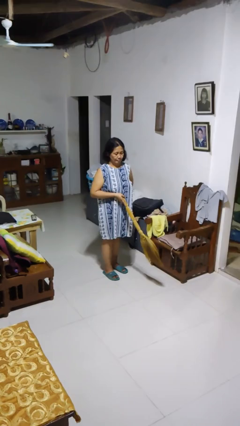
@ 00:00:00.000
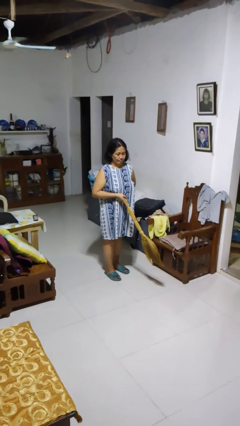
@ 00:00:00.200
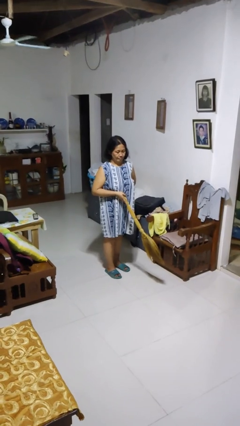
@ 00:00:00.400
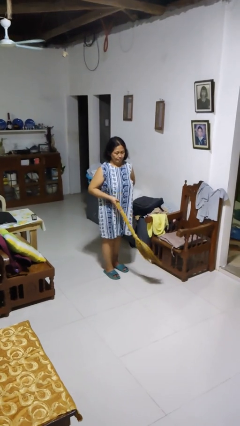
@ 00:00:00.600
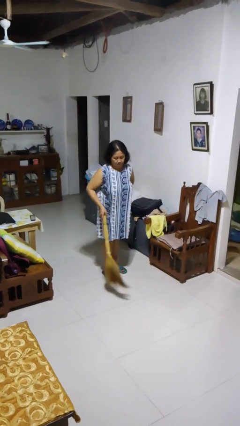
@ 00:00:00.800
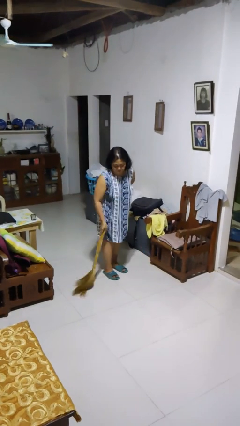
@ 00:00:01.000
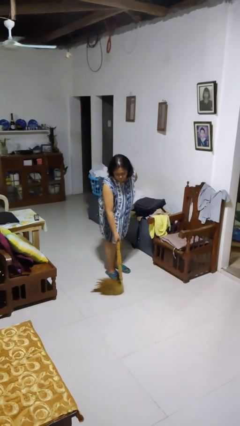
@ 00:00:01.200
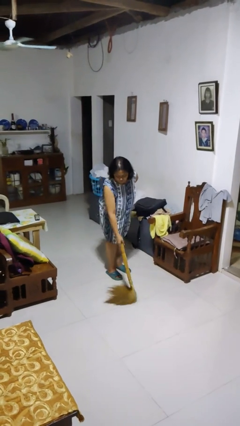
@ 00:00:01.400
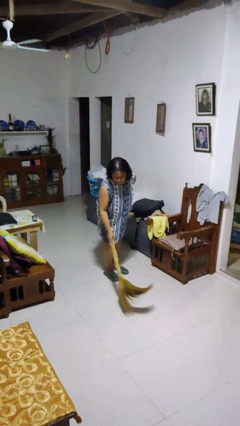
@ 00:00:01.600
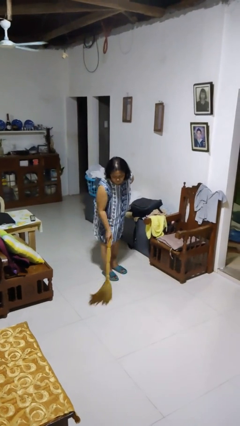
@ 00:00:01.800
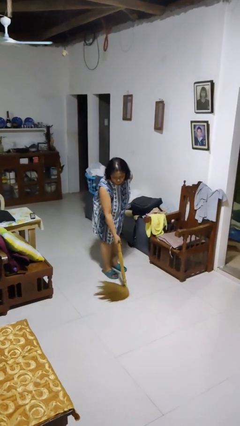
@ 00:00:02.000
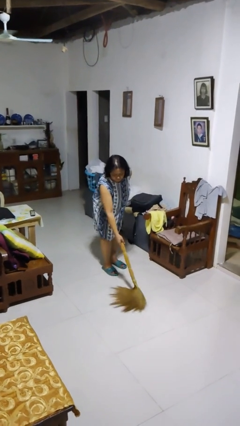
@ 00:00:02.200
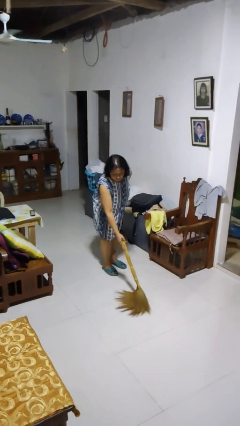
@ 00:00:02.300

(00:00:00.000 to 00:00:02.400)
person sweeps floor

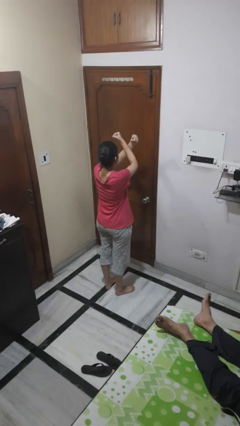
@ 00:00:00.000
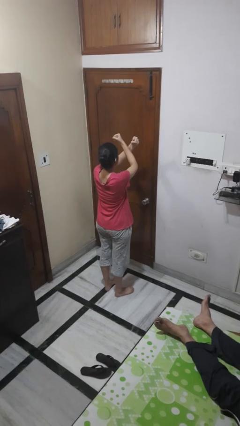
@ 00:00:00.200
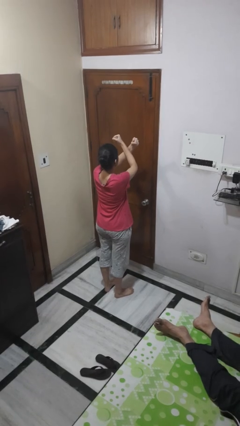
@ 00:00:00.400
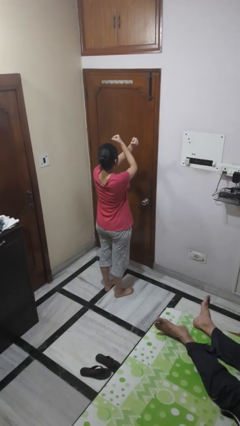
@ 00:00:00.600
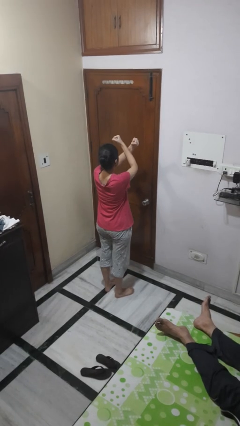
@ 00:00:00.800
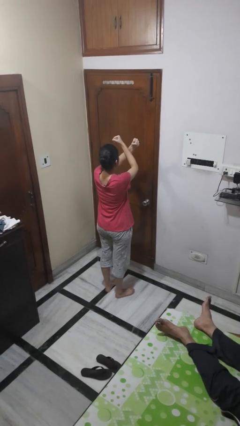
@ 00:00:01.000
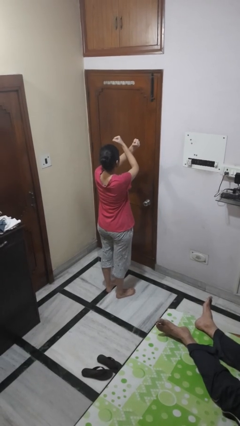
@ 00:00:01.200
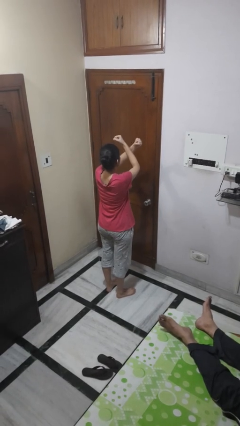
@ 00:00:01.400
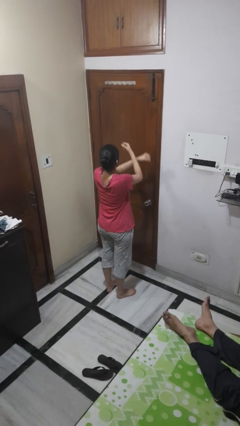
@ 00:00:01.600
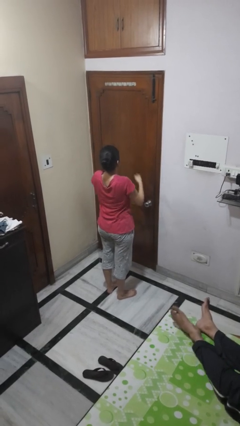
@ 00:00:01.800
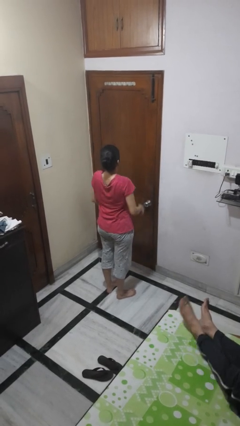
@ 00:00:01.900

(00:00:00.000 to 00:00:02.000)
person gestures arms x

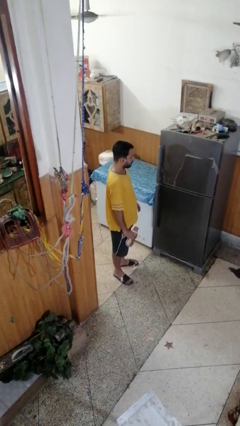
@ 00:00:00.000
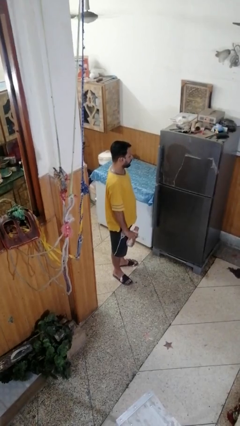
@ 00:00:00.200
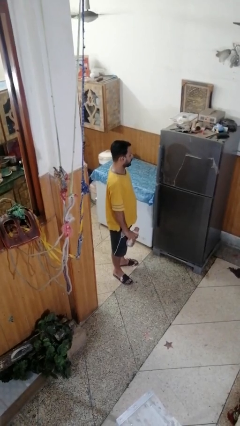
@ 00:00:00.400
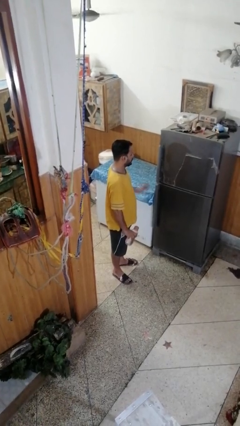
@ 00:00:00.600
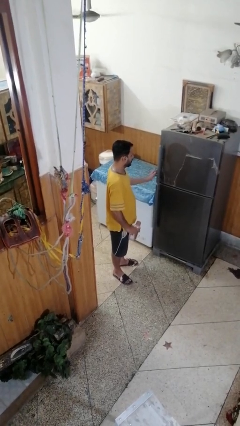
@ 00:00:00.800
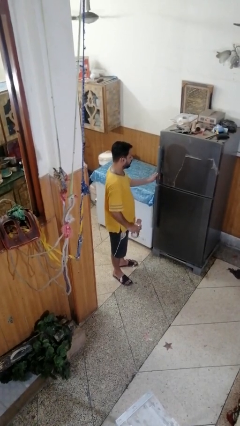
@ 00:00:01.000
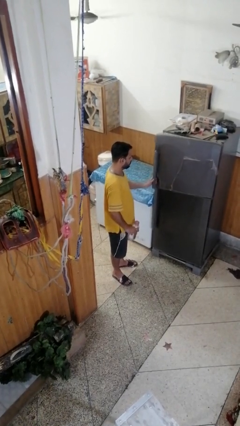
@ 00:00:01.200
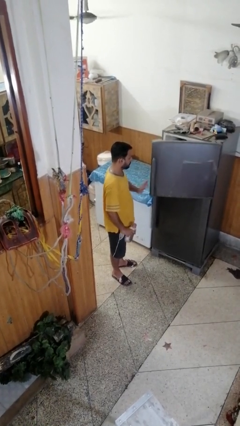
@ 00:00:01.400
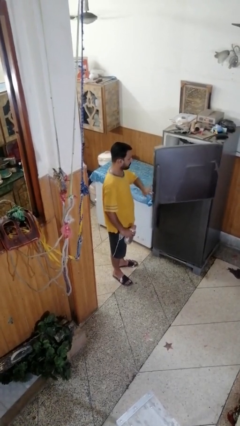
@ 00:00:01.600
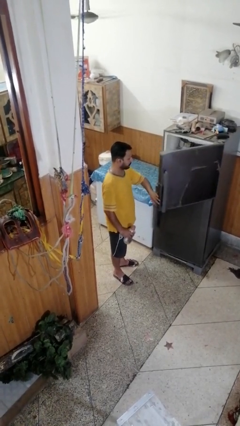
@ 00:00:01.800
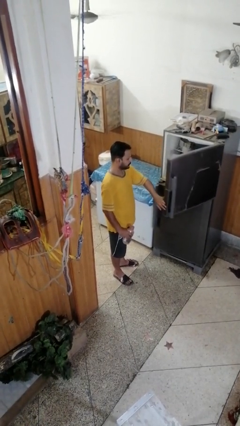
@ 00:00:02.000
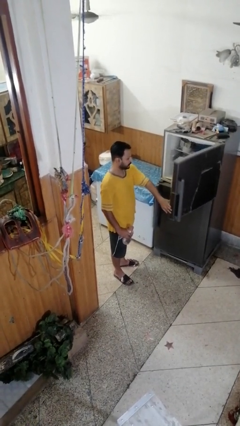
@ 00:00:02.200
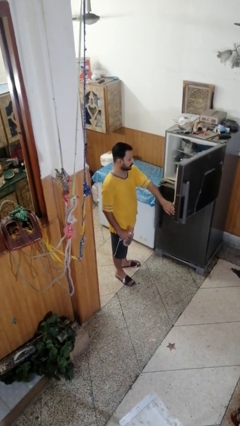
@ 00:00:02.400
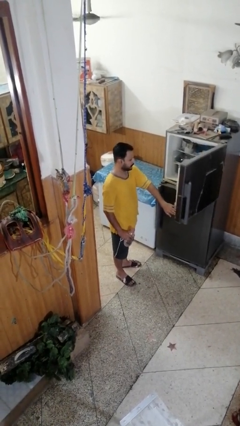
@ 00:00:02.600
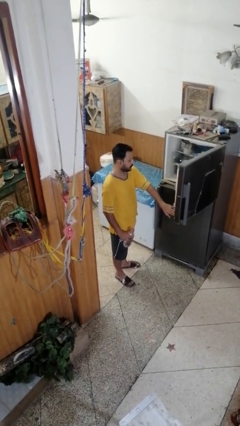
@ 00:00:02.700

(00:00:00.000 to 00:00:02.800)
person opens refrigerator

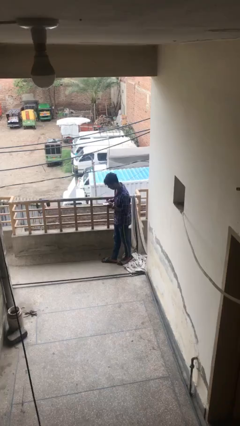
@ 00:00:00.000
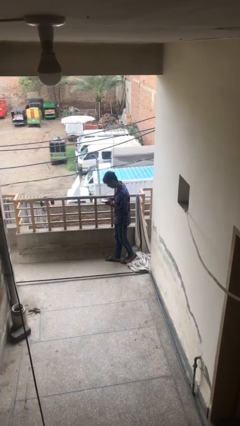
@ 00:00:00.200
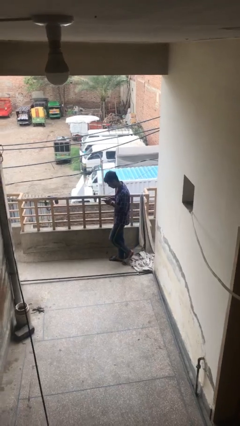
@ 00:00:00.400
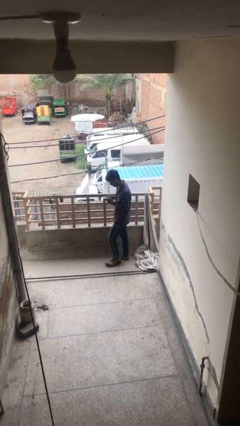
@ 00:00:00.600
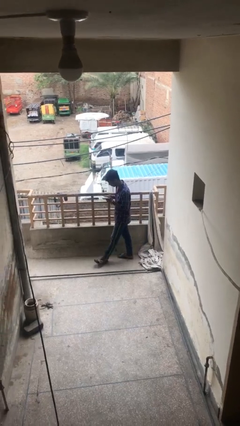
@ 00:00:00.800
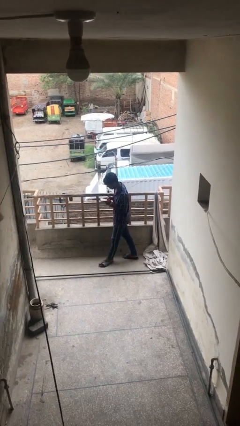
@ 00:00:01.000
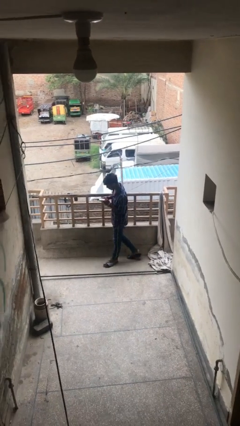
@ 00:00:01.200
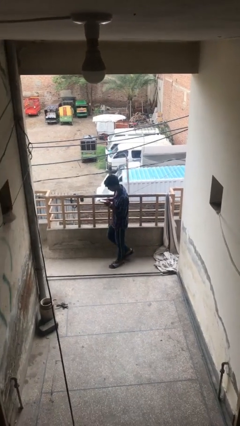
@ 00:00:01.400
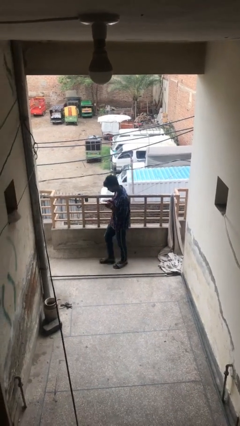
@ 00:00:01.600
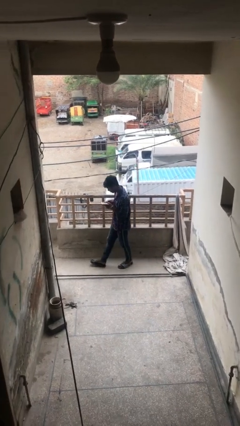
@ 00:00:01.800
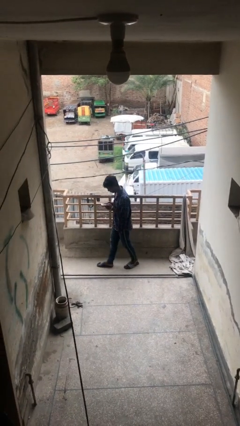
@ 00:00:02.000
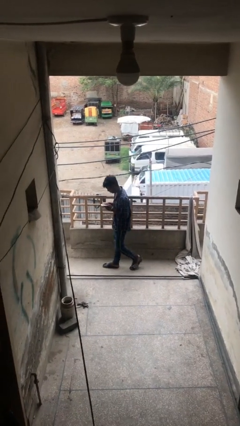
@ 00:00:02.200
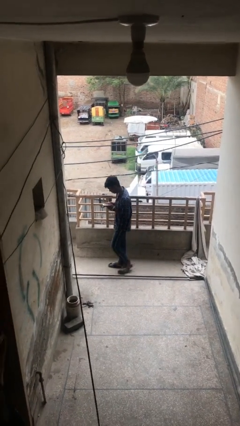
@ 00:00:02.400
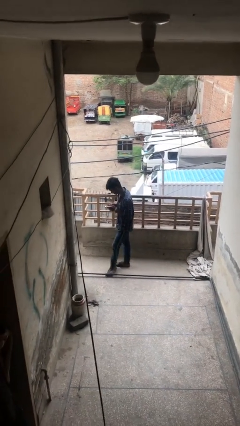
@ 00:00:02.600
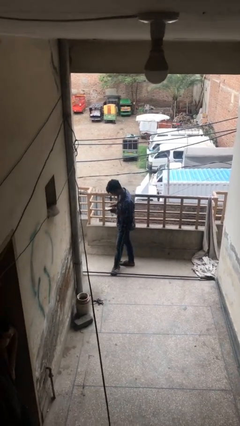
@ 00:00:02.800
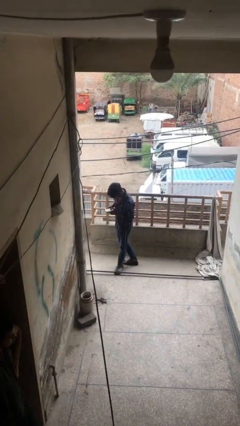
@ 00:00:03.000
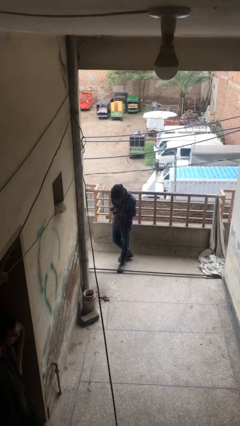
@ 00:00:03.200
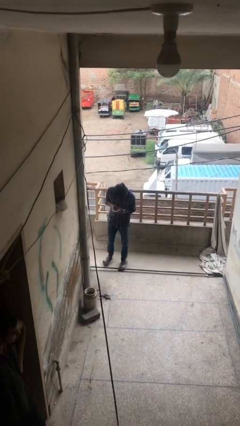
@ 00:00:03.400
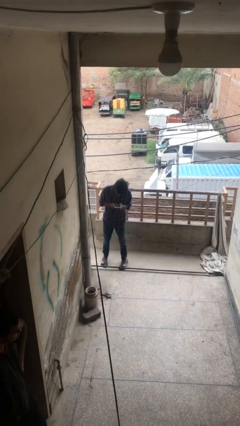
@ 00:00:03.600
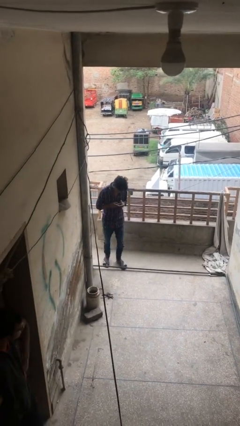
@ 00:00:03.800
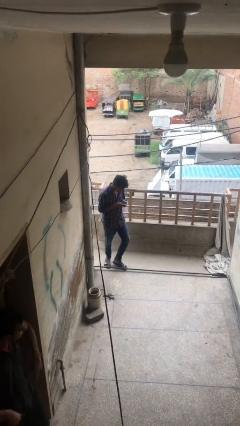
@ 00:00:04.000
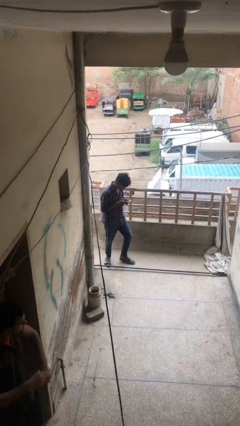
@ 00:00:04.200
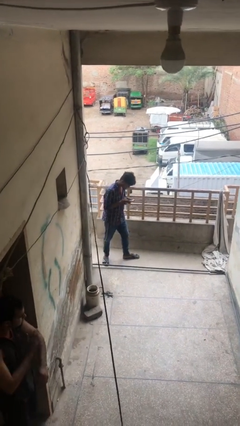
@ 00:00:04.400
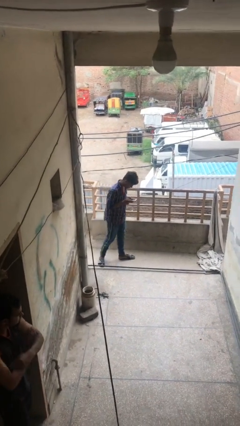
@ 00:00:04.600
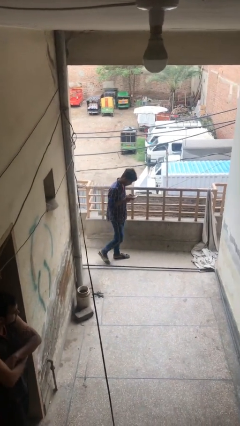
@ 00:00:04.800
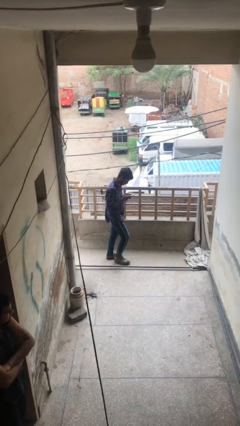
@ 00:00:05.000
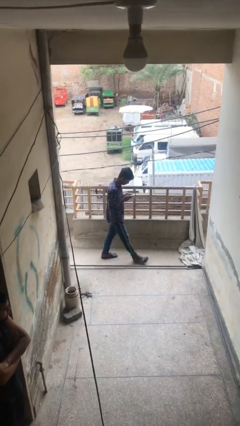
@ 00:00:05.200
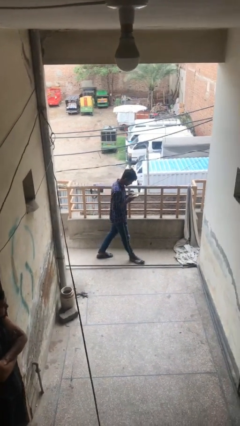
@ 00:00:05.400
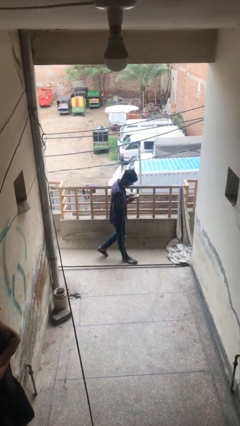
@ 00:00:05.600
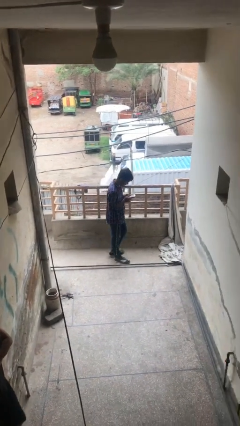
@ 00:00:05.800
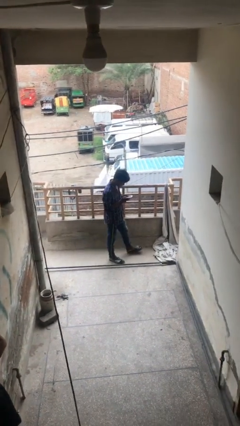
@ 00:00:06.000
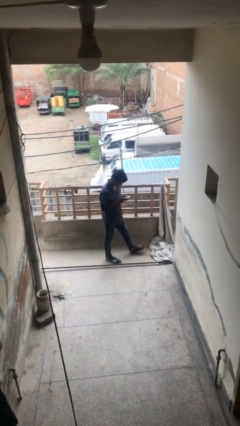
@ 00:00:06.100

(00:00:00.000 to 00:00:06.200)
person texts on phone

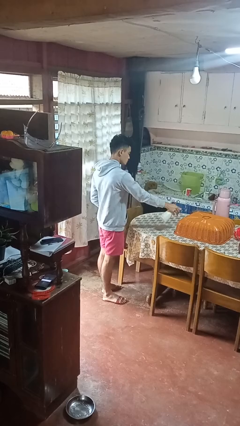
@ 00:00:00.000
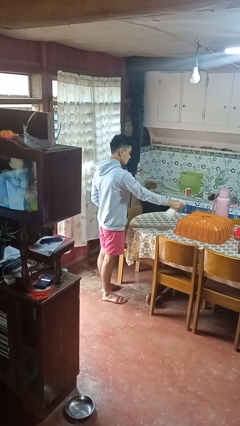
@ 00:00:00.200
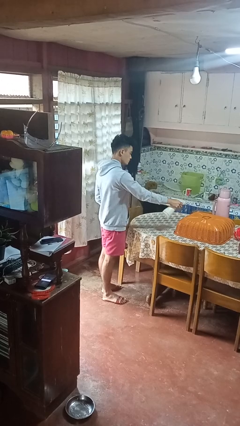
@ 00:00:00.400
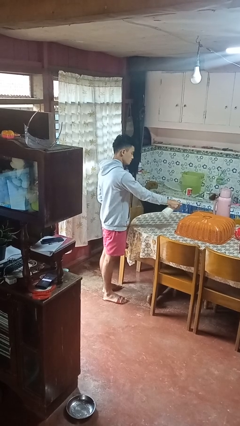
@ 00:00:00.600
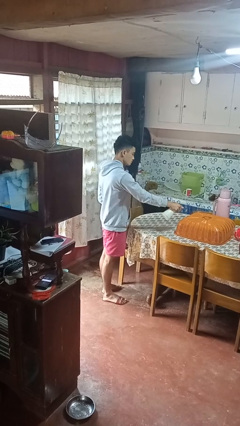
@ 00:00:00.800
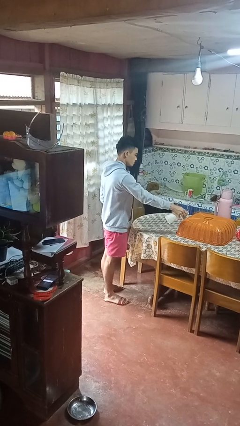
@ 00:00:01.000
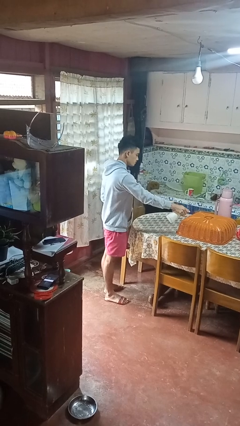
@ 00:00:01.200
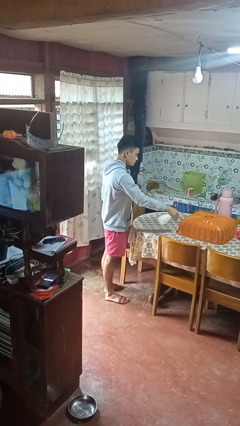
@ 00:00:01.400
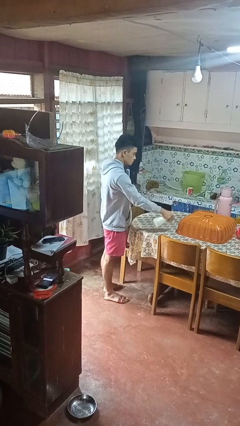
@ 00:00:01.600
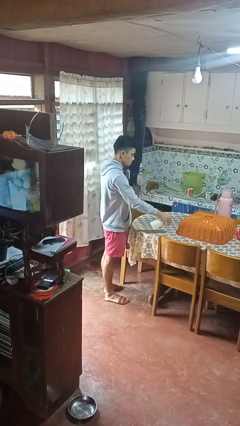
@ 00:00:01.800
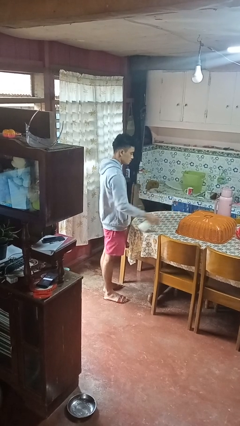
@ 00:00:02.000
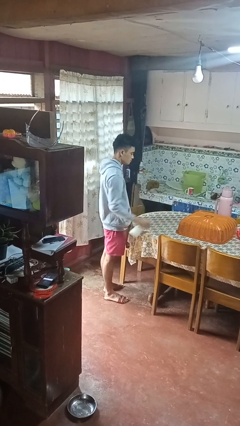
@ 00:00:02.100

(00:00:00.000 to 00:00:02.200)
person sprays from bottle

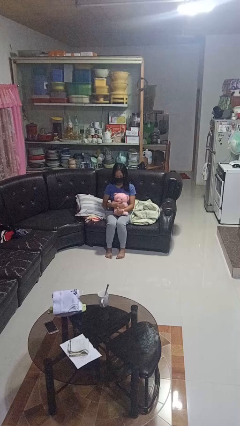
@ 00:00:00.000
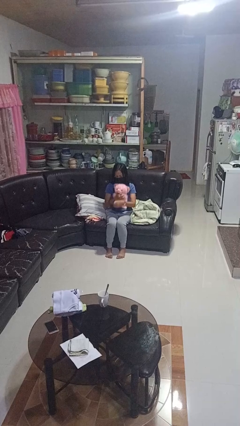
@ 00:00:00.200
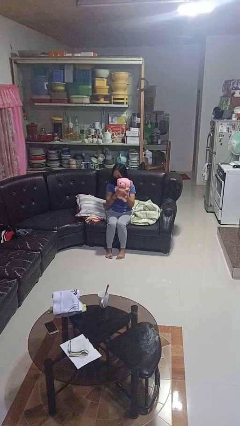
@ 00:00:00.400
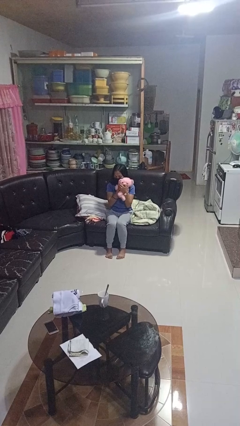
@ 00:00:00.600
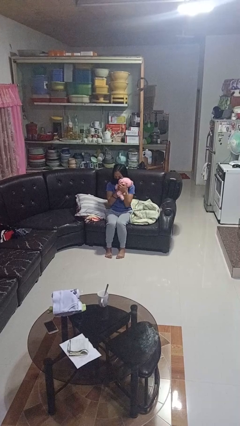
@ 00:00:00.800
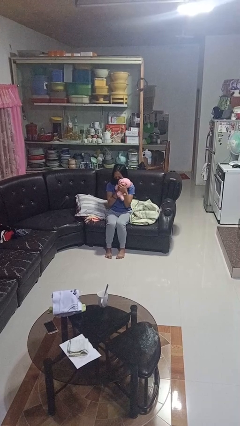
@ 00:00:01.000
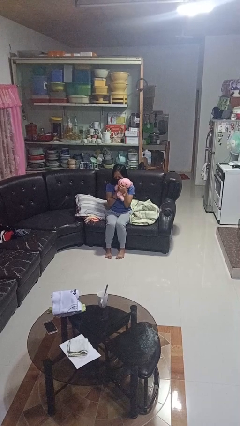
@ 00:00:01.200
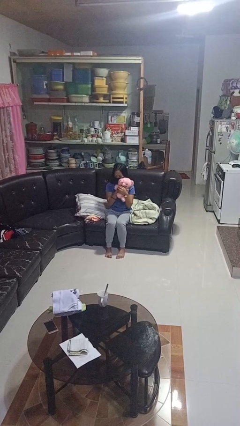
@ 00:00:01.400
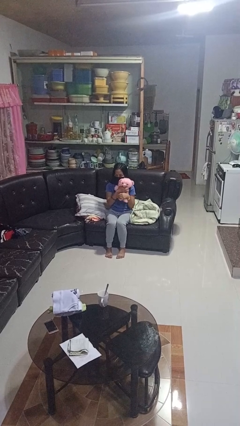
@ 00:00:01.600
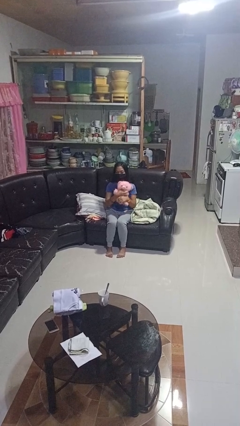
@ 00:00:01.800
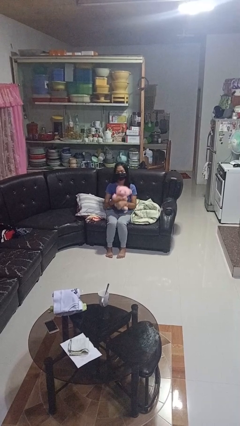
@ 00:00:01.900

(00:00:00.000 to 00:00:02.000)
person hugs stuffed animal
